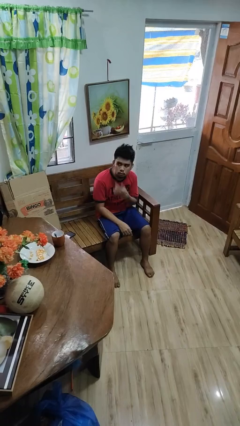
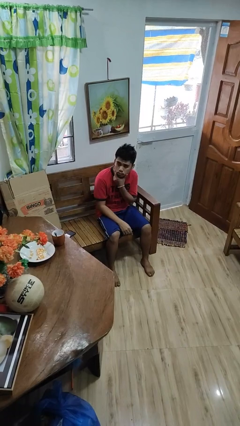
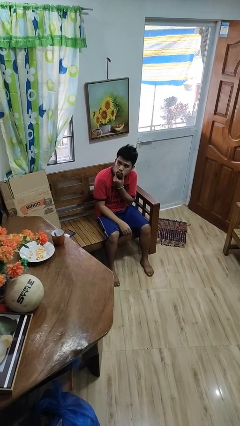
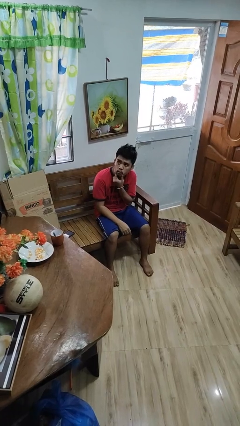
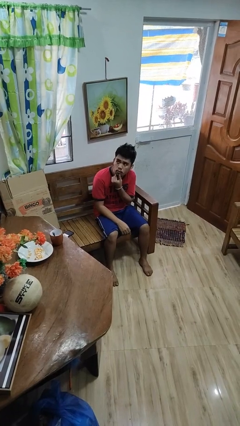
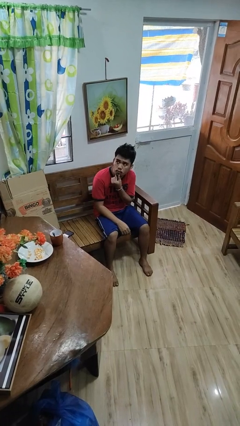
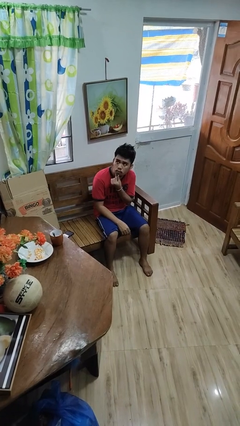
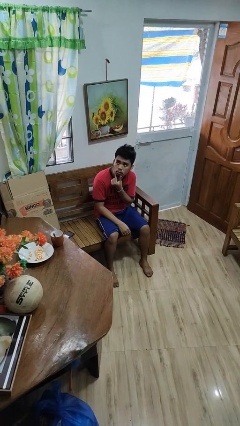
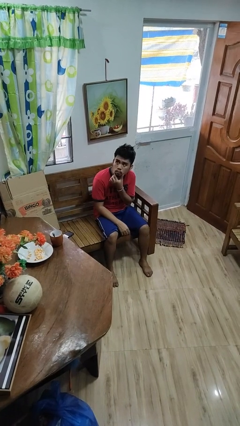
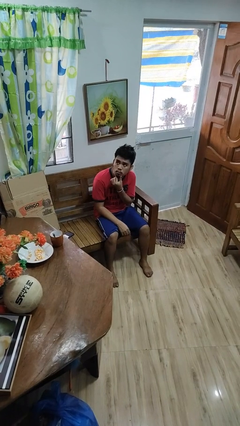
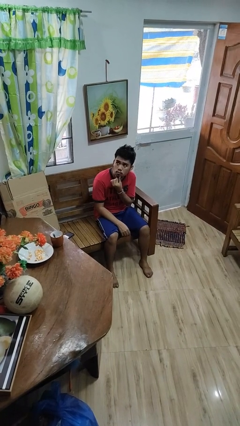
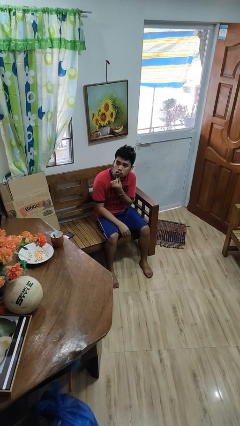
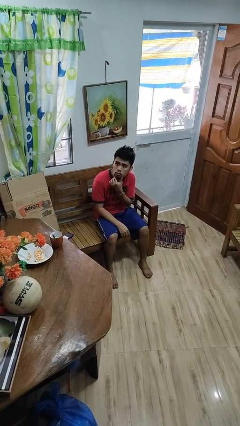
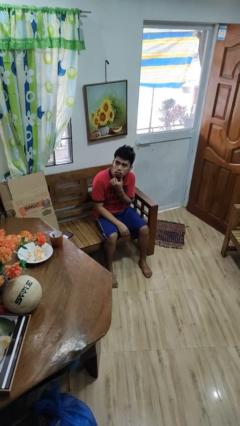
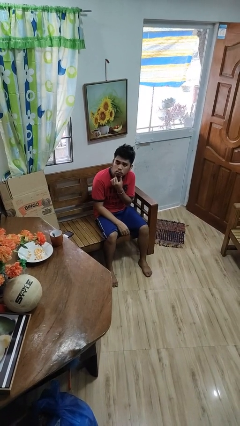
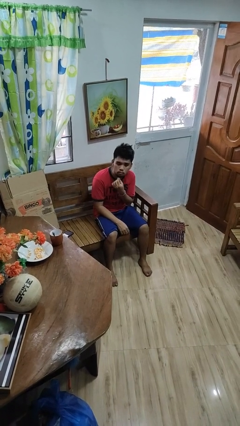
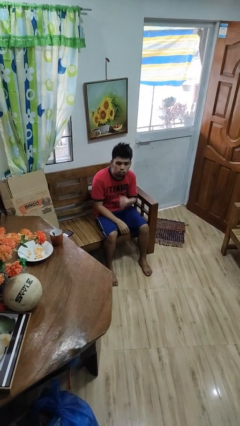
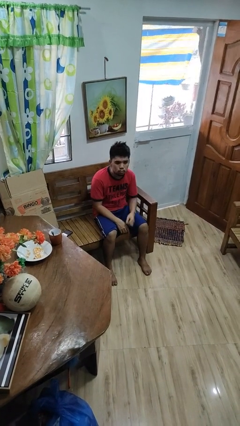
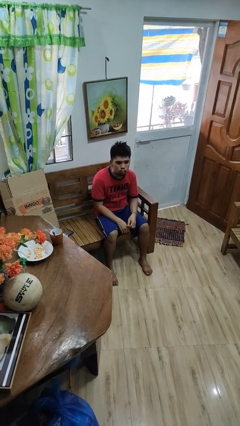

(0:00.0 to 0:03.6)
person strokes chin

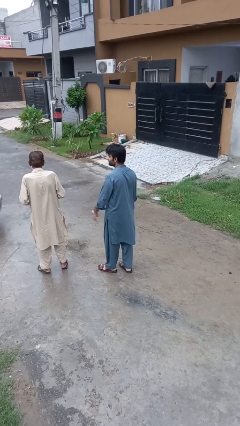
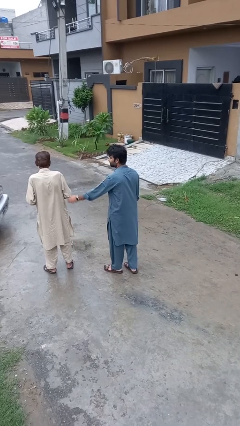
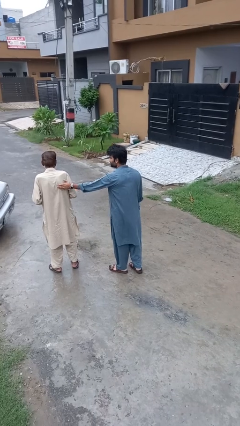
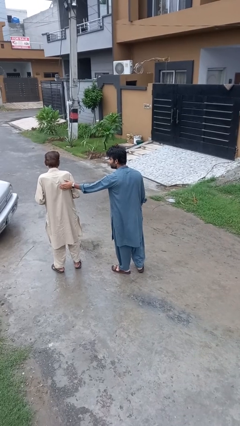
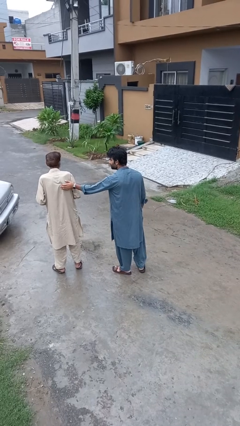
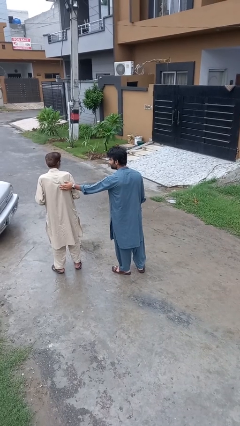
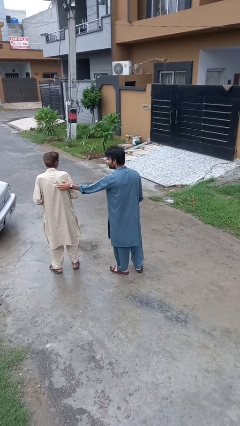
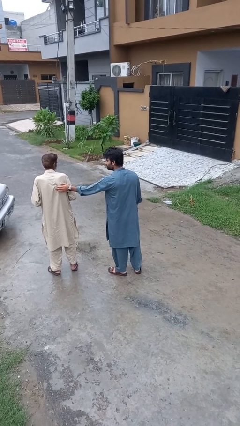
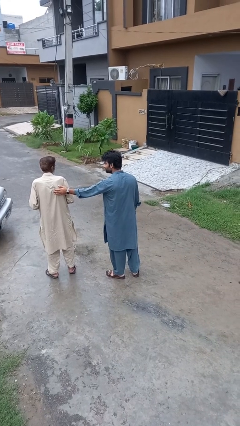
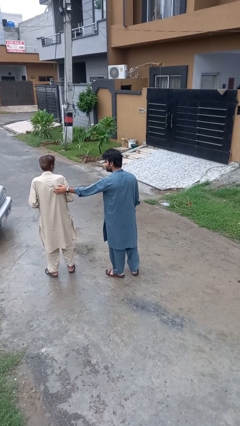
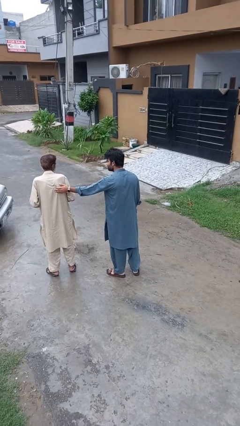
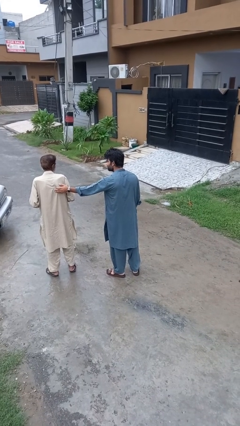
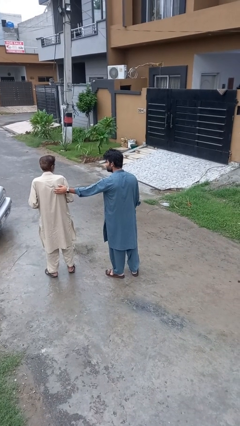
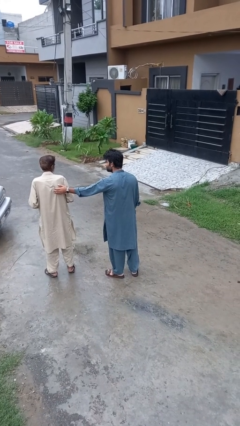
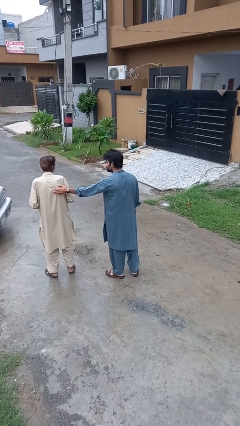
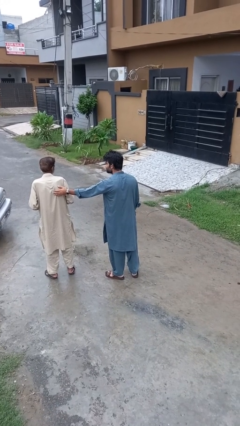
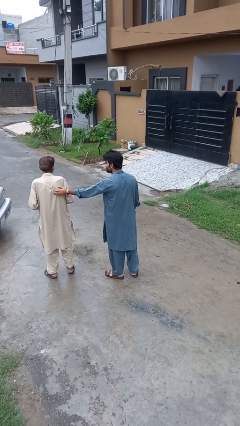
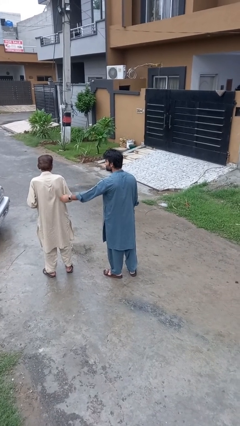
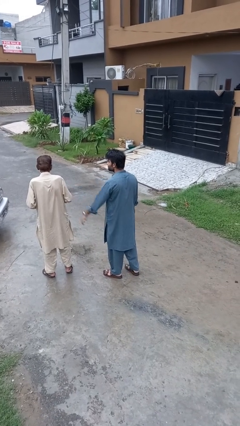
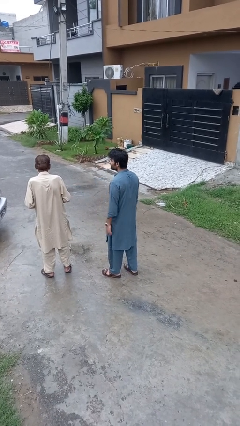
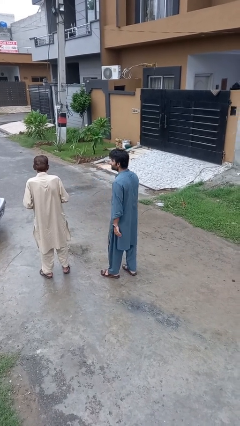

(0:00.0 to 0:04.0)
person touches back of person

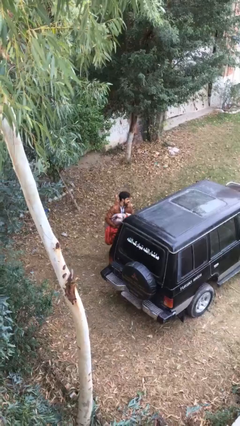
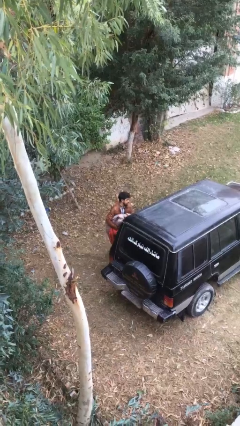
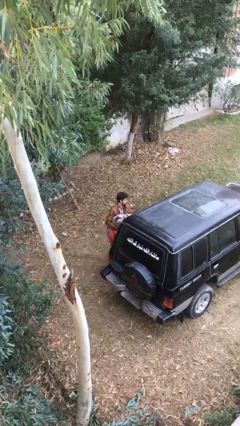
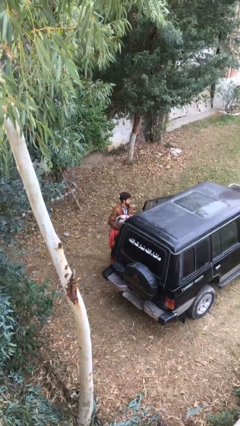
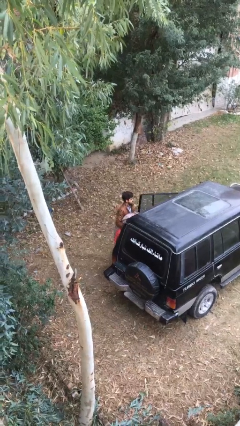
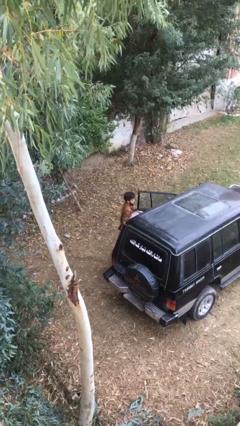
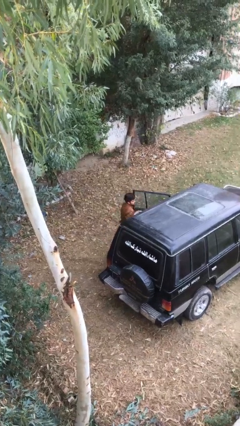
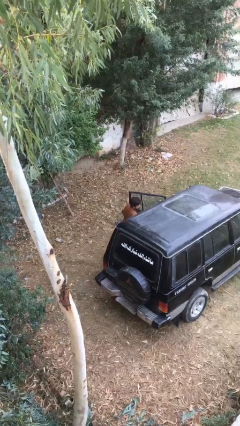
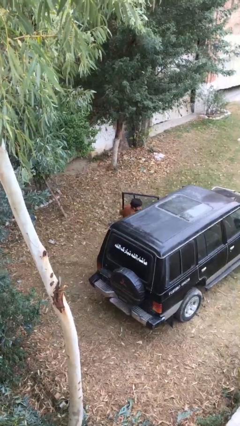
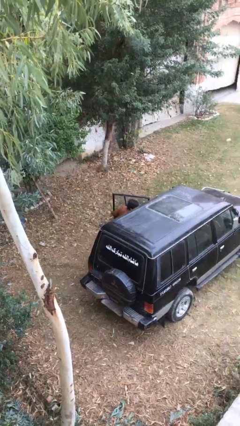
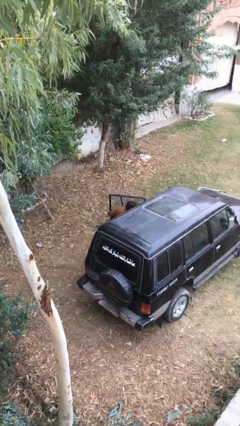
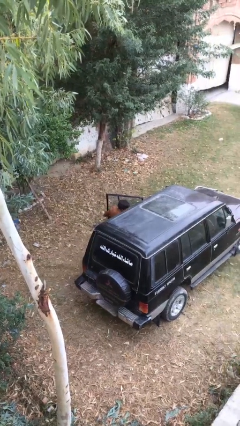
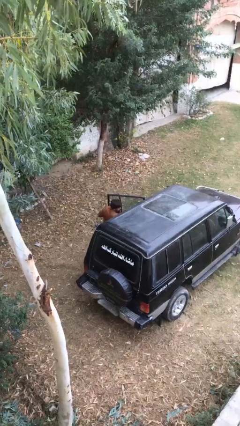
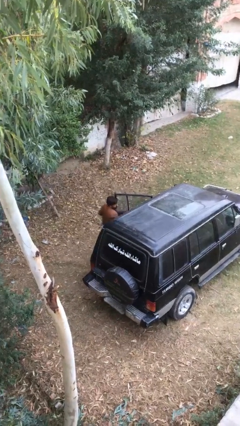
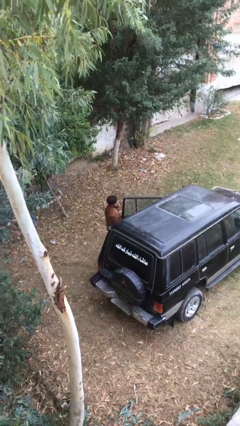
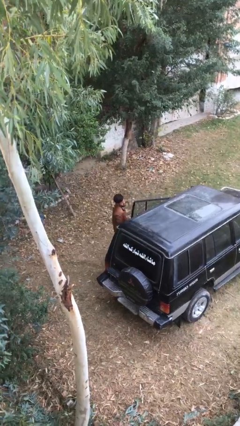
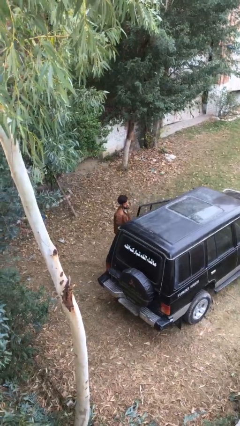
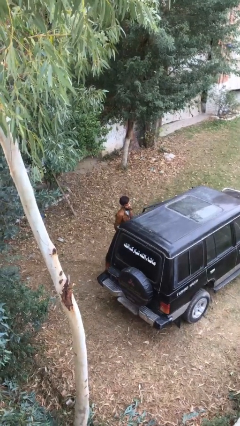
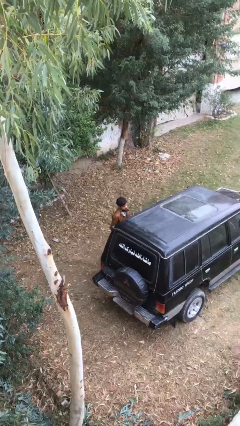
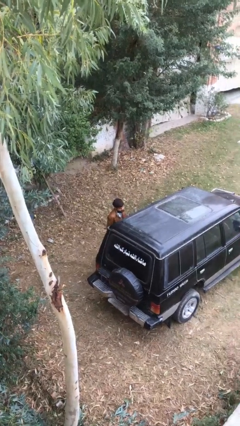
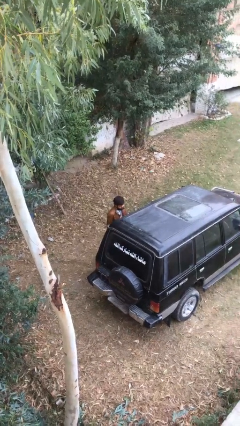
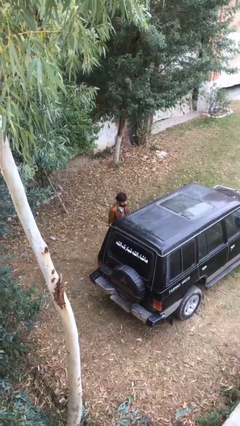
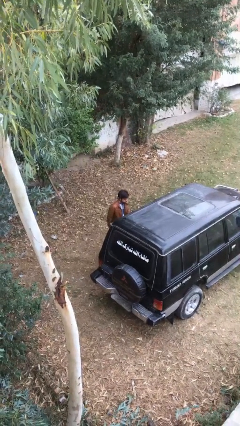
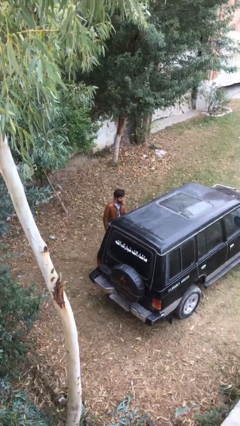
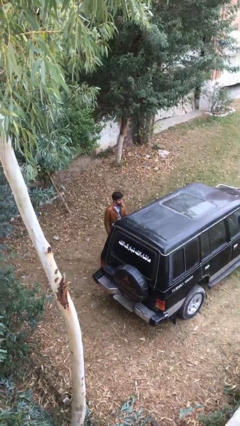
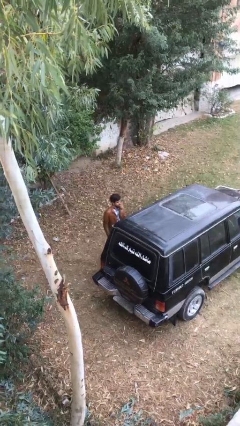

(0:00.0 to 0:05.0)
person loads car

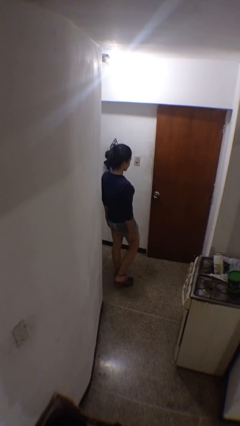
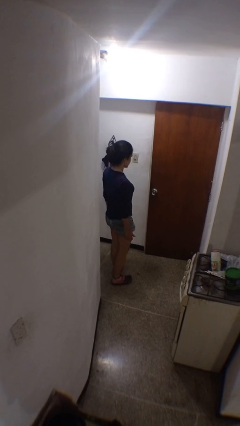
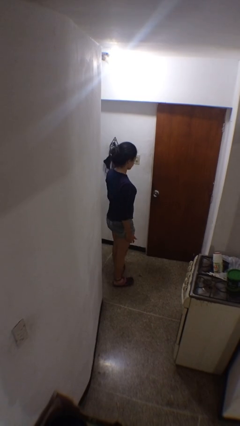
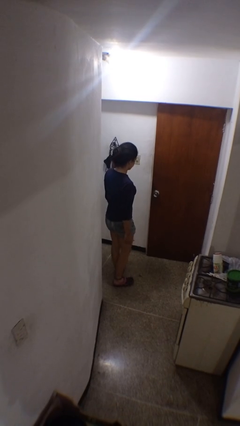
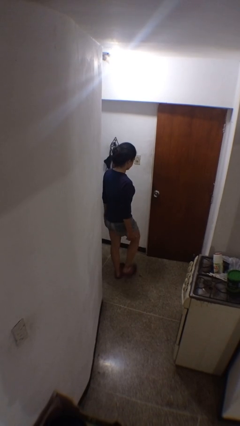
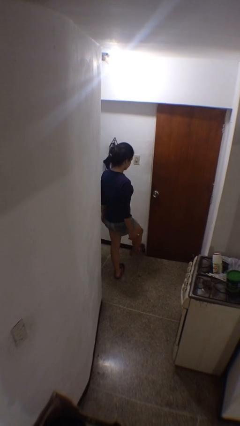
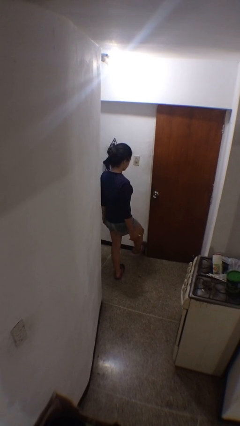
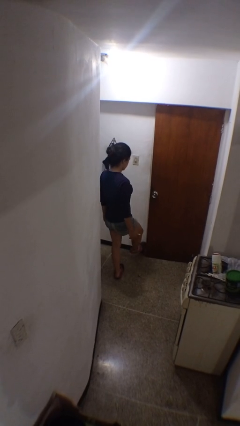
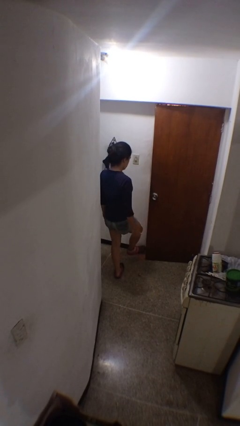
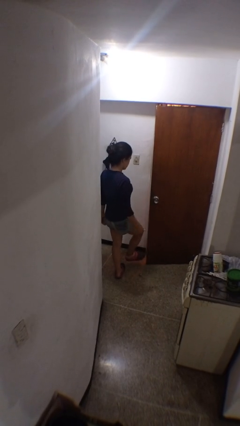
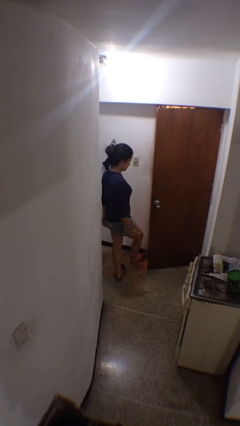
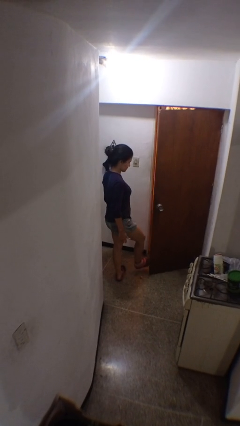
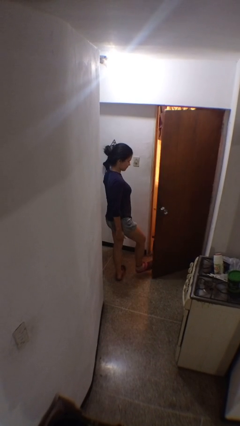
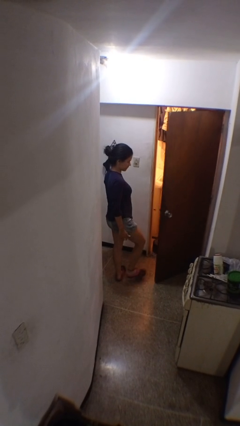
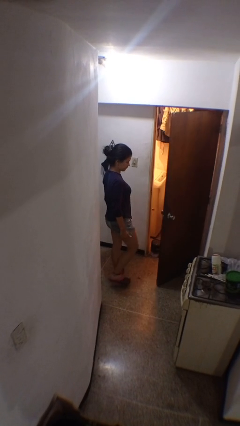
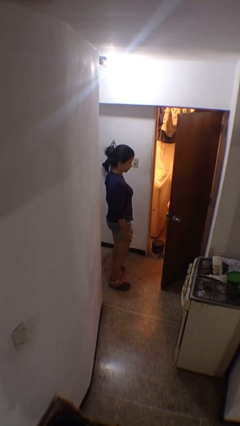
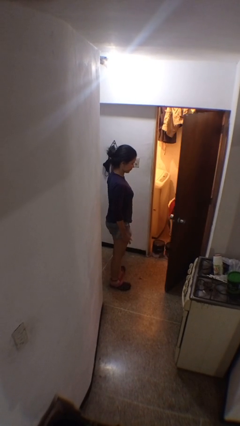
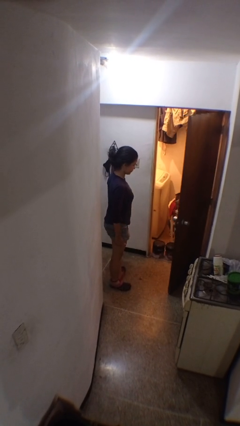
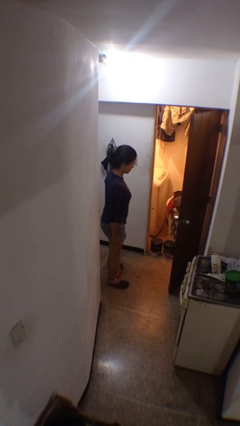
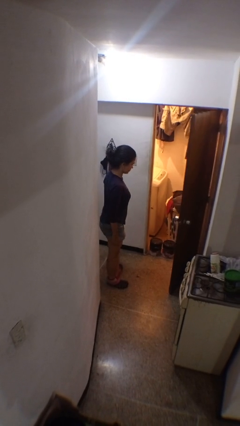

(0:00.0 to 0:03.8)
person opens facility door

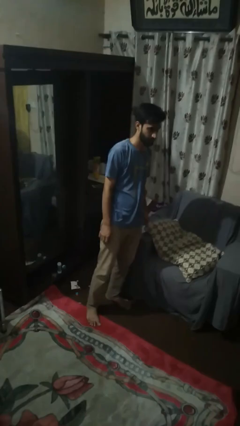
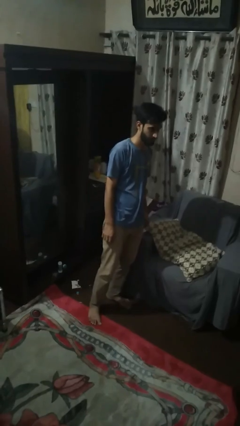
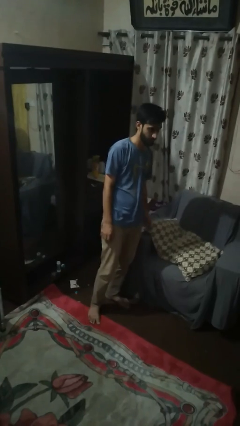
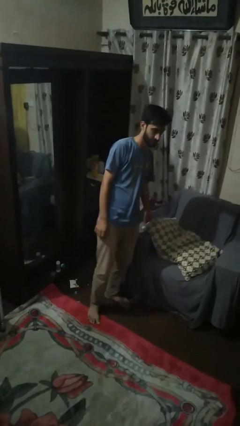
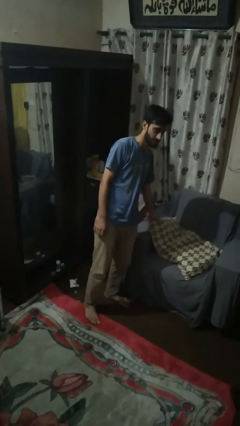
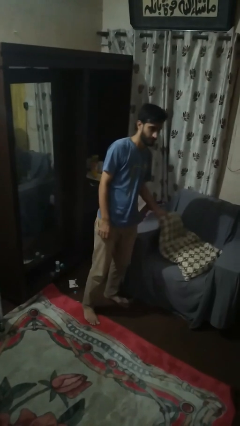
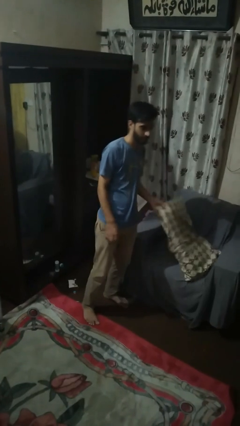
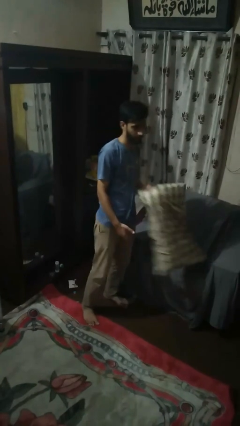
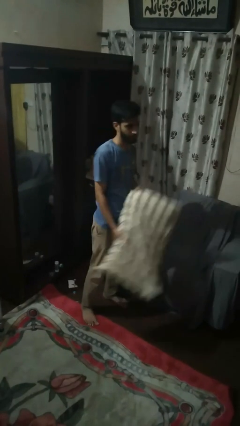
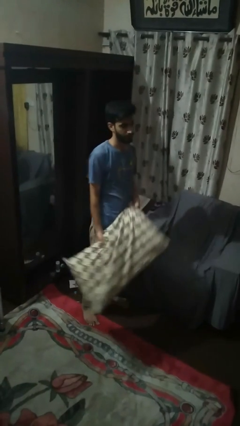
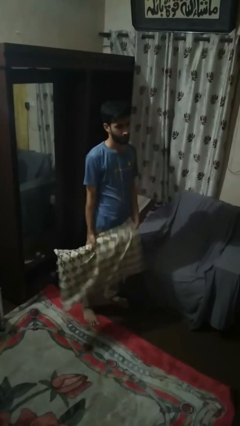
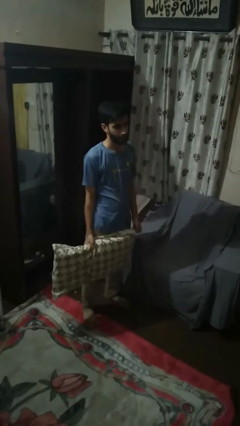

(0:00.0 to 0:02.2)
person picks up object from couch
